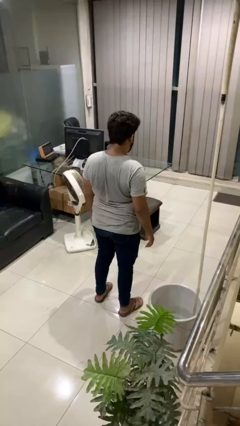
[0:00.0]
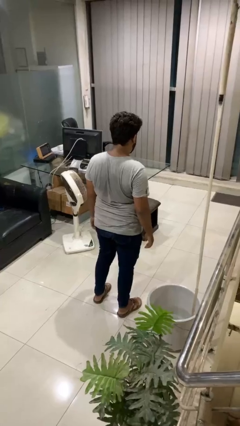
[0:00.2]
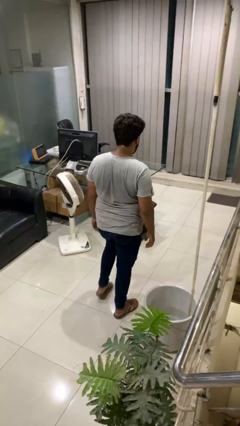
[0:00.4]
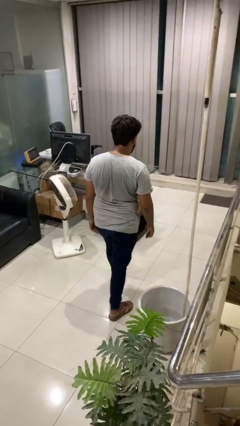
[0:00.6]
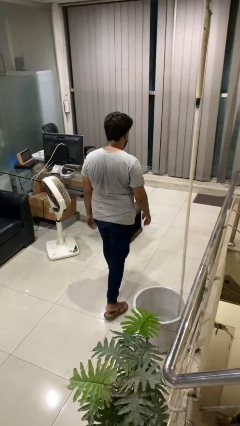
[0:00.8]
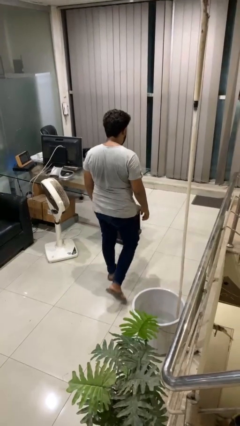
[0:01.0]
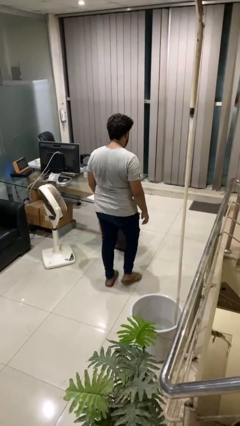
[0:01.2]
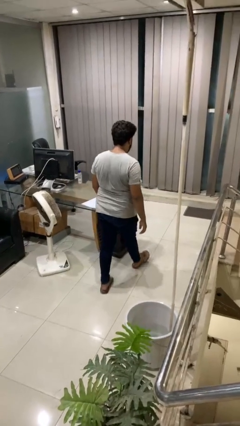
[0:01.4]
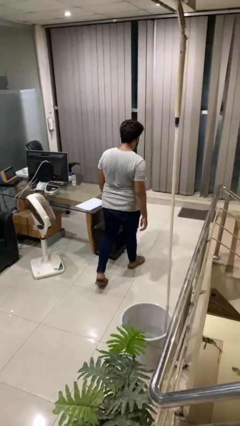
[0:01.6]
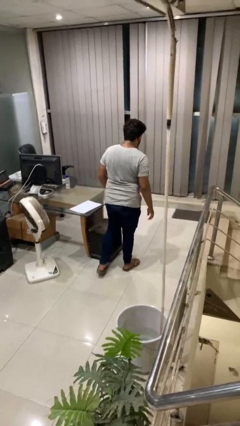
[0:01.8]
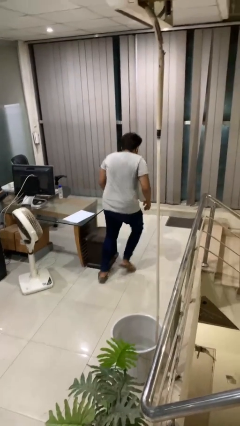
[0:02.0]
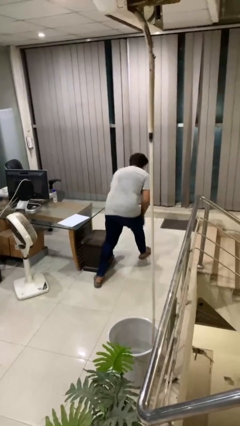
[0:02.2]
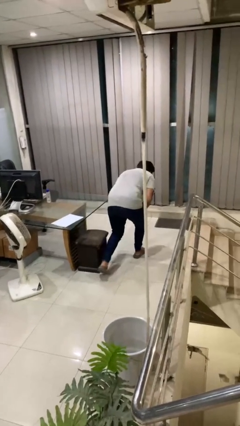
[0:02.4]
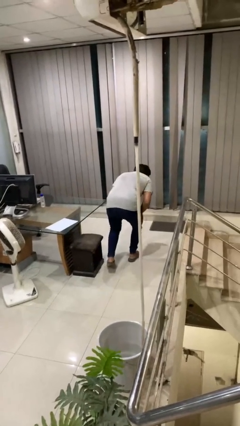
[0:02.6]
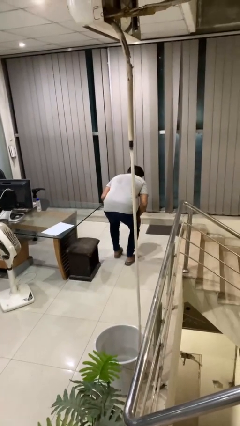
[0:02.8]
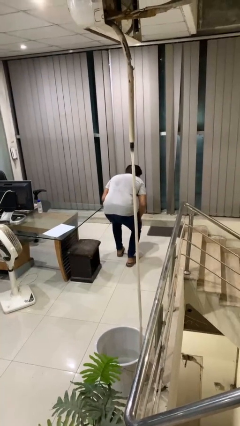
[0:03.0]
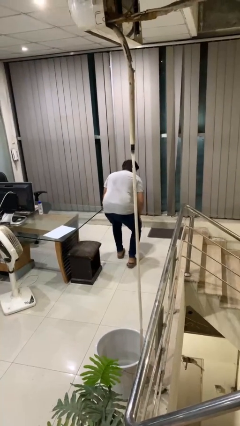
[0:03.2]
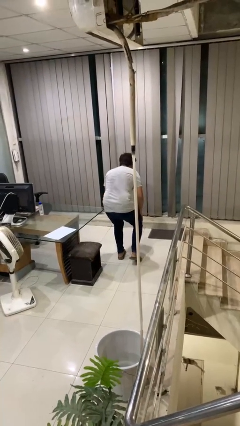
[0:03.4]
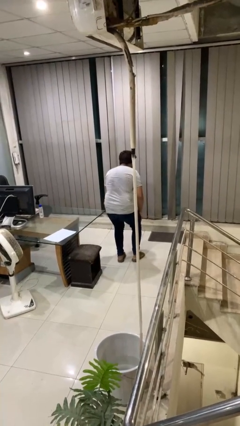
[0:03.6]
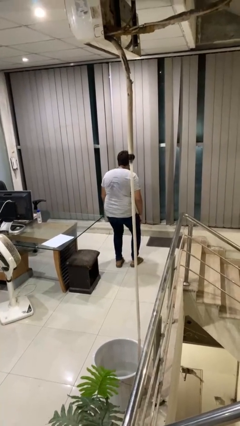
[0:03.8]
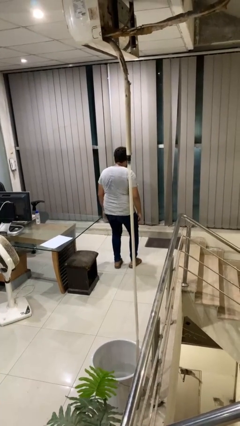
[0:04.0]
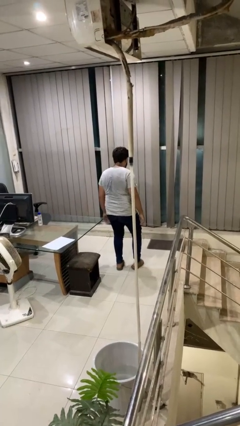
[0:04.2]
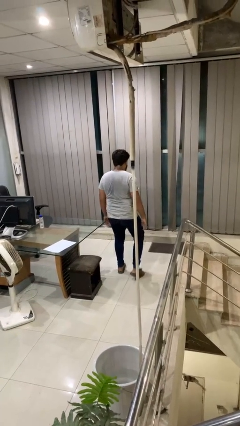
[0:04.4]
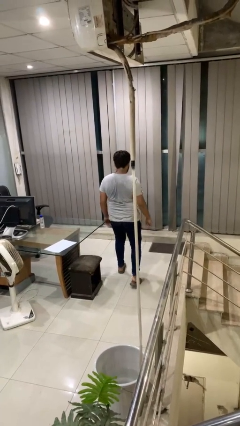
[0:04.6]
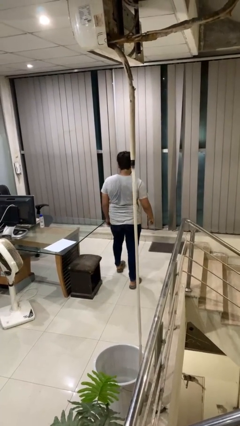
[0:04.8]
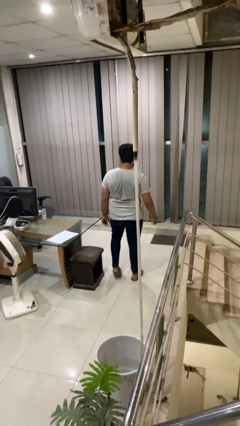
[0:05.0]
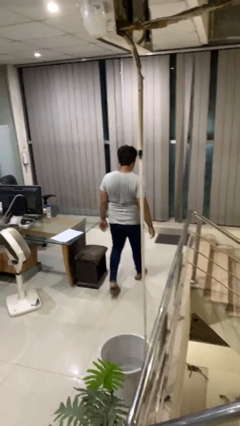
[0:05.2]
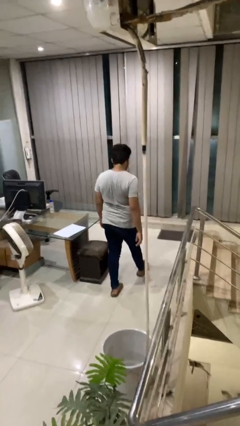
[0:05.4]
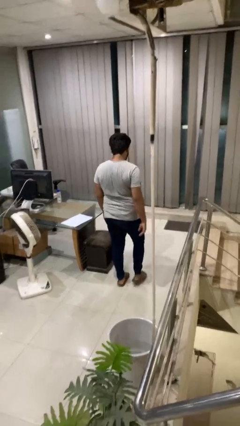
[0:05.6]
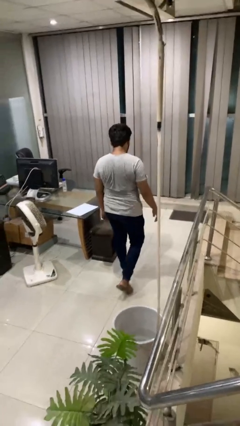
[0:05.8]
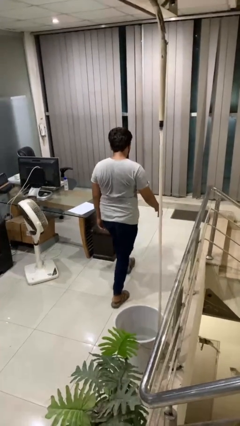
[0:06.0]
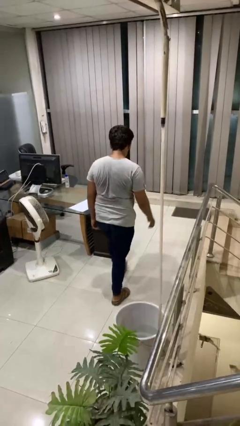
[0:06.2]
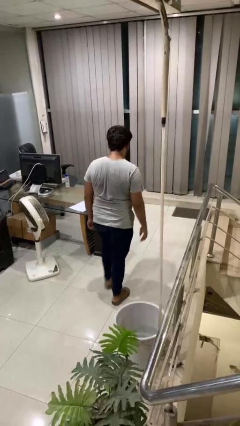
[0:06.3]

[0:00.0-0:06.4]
person bumps into table

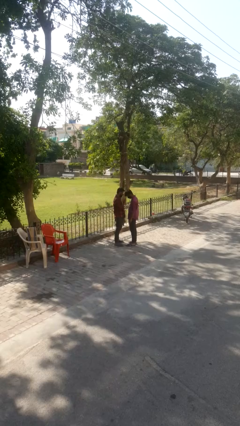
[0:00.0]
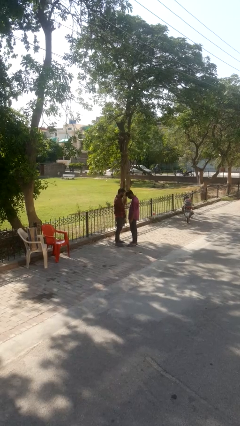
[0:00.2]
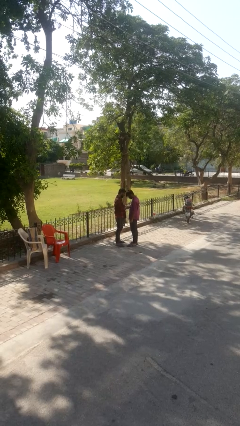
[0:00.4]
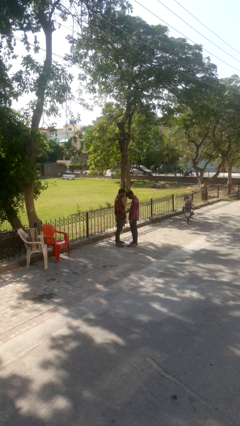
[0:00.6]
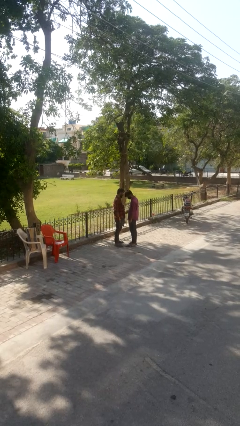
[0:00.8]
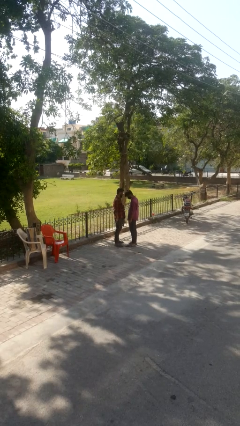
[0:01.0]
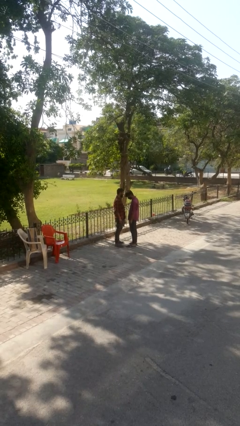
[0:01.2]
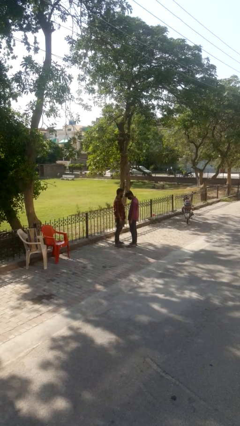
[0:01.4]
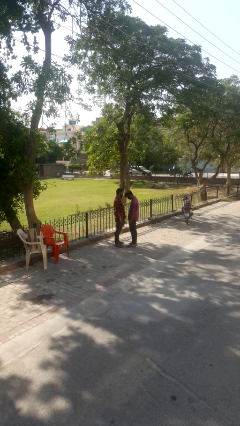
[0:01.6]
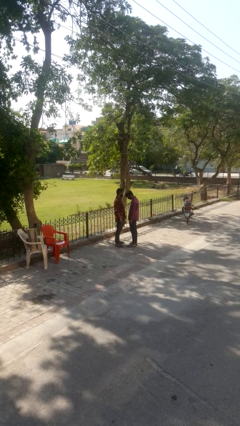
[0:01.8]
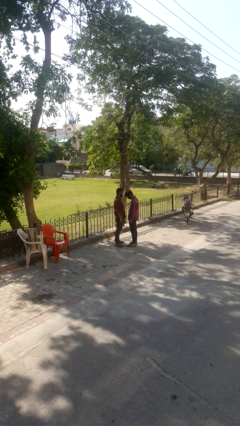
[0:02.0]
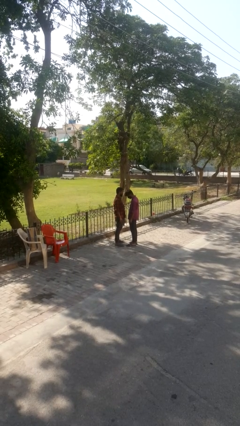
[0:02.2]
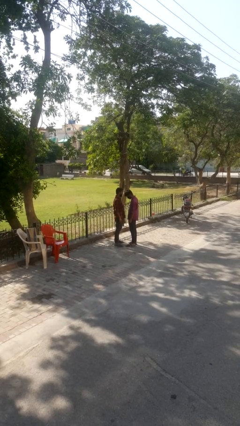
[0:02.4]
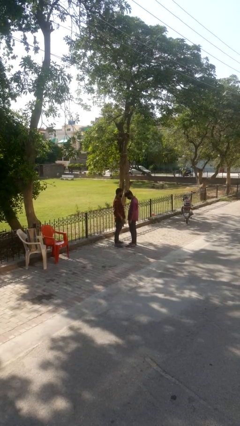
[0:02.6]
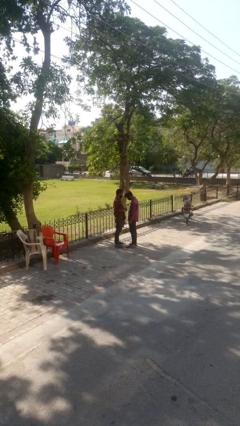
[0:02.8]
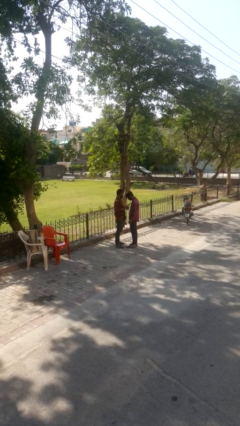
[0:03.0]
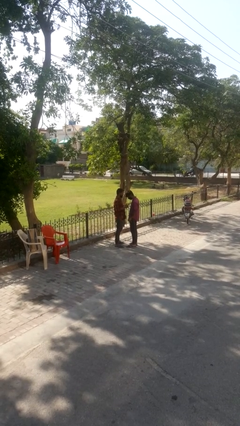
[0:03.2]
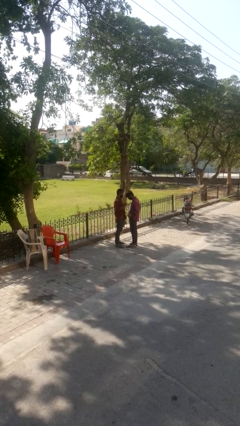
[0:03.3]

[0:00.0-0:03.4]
person highfives hand

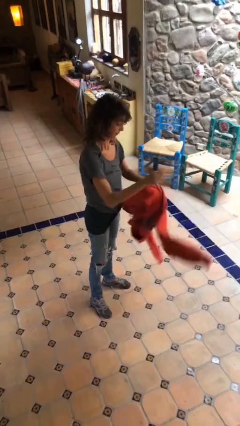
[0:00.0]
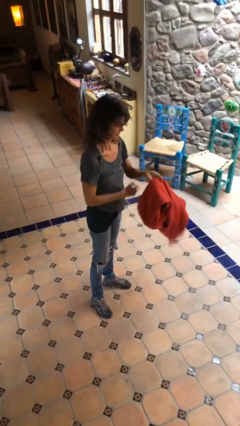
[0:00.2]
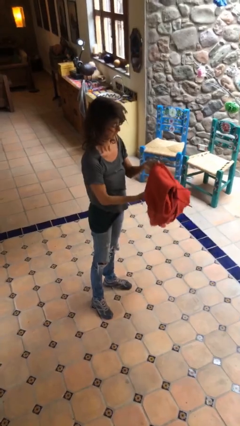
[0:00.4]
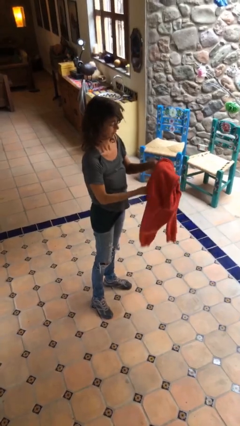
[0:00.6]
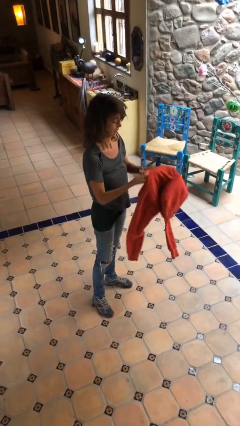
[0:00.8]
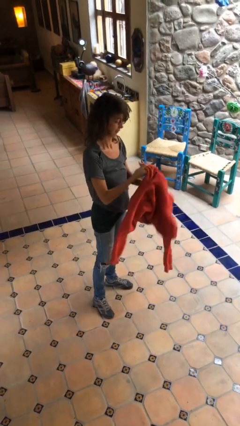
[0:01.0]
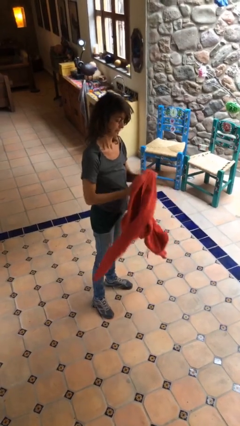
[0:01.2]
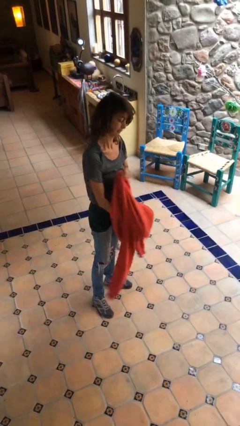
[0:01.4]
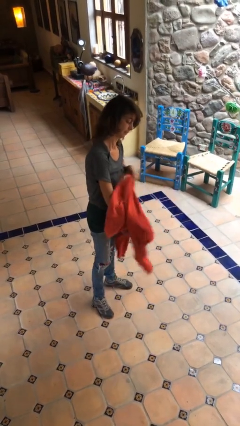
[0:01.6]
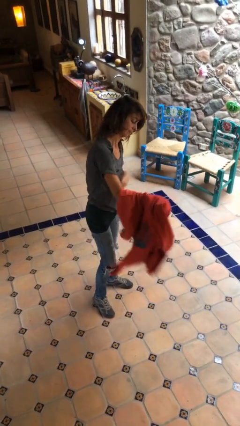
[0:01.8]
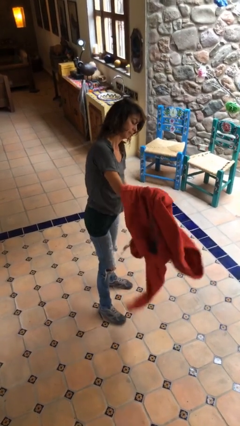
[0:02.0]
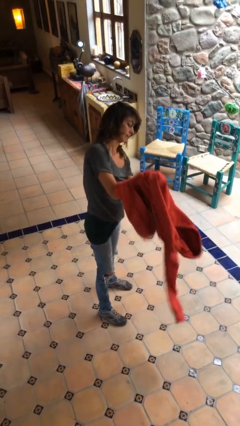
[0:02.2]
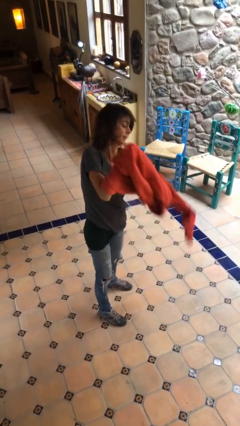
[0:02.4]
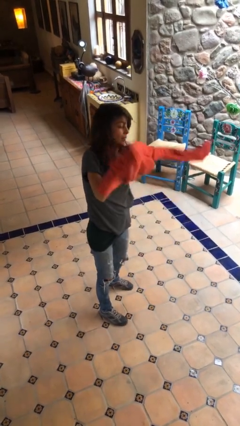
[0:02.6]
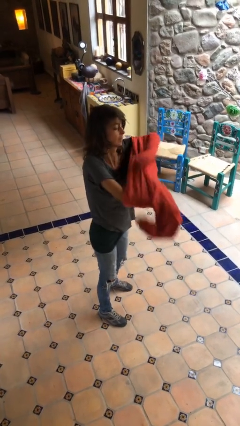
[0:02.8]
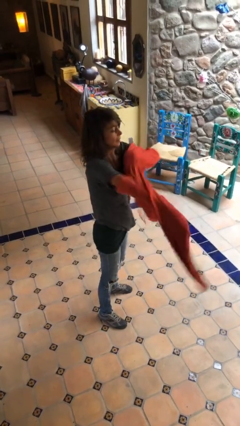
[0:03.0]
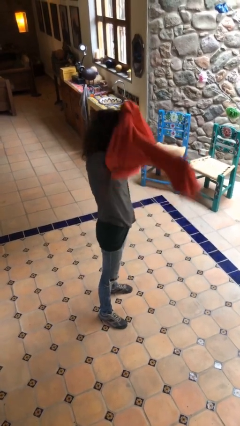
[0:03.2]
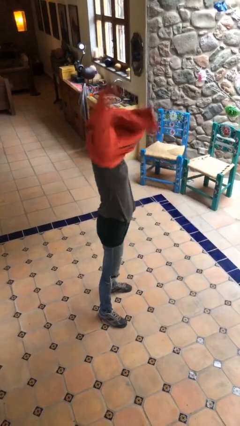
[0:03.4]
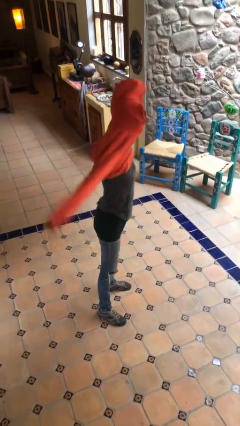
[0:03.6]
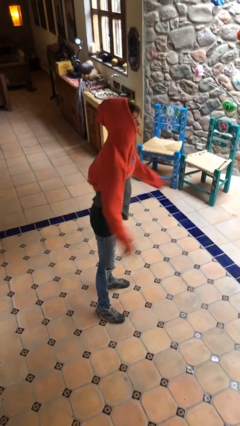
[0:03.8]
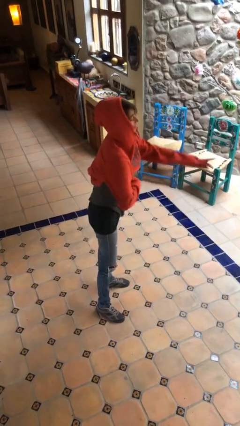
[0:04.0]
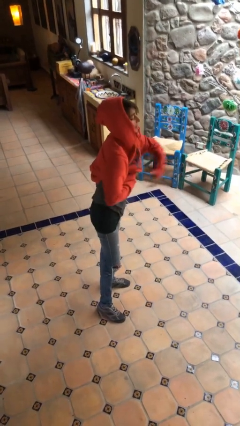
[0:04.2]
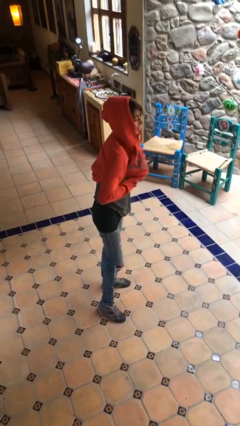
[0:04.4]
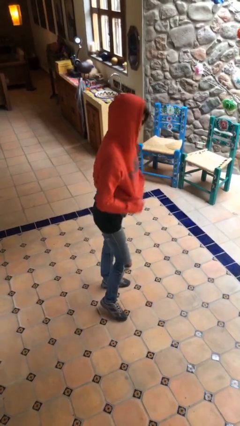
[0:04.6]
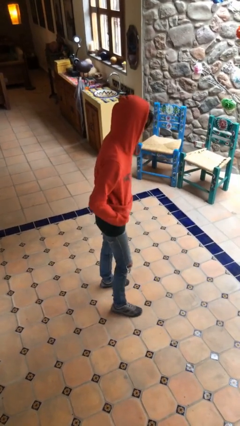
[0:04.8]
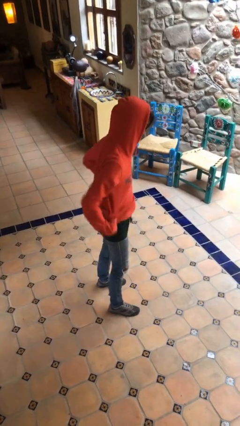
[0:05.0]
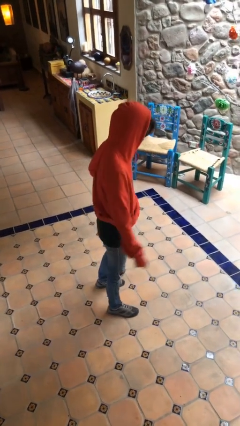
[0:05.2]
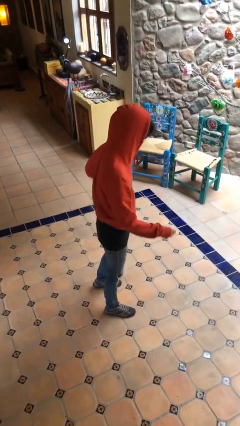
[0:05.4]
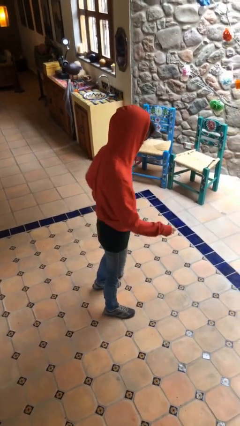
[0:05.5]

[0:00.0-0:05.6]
person puts on hoodie

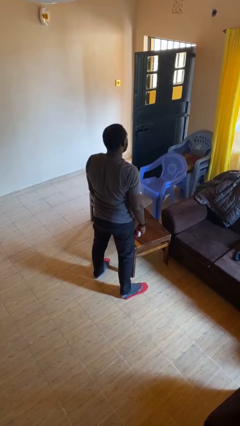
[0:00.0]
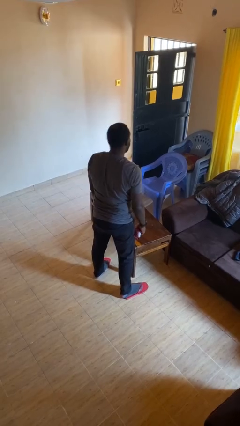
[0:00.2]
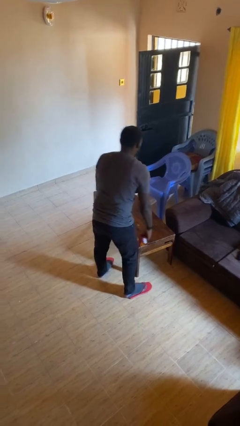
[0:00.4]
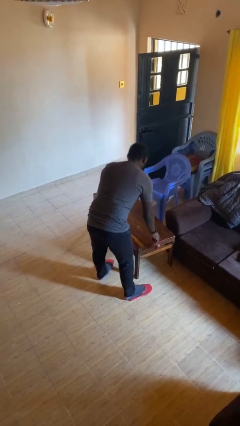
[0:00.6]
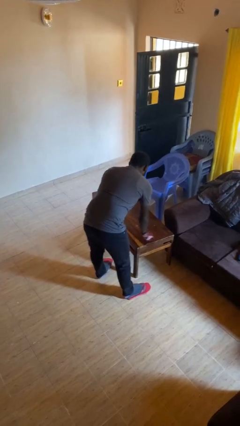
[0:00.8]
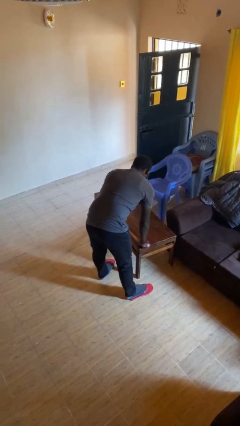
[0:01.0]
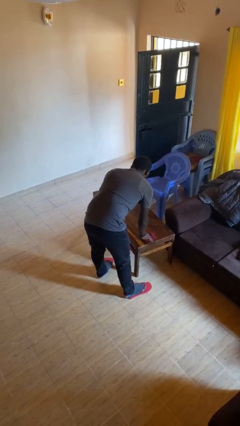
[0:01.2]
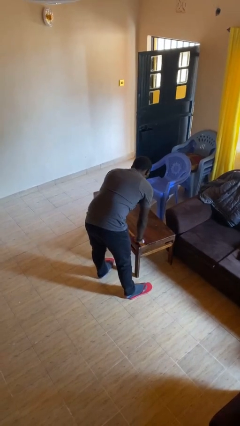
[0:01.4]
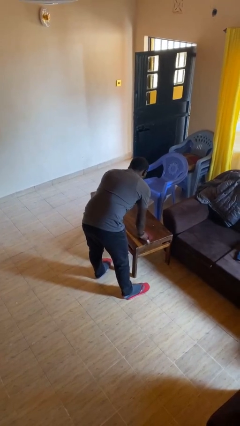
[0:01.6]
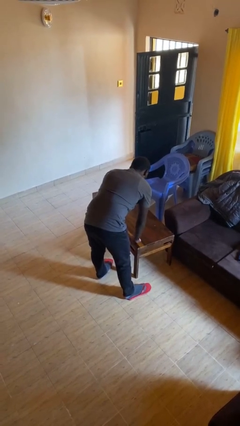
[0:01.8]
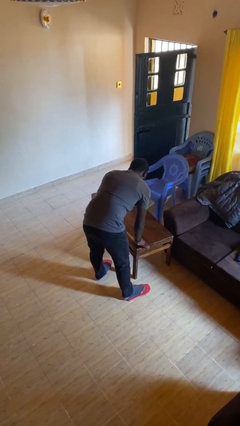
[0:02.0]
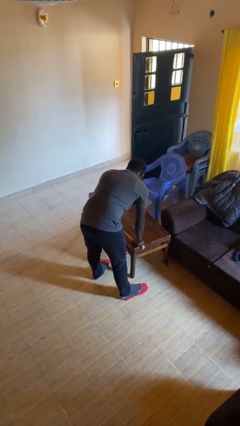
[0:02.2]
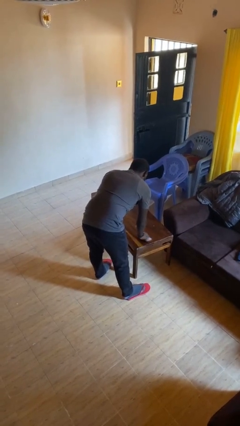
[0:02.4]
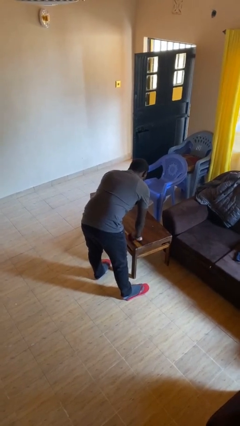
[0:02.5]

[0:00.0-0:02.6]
person cleans table with rag
